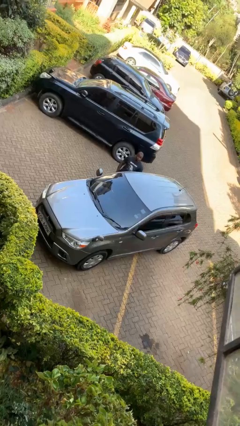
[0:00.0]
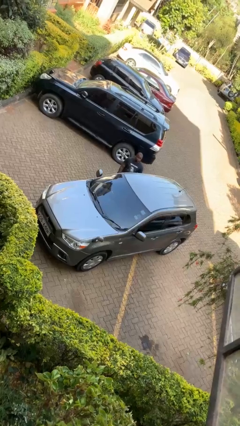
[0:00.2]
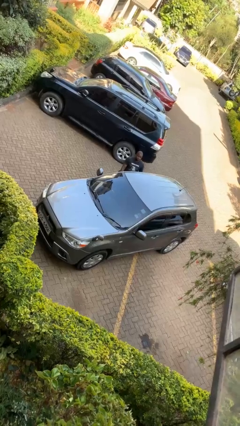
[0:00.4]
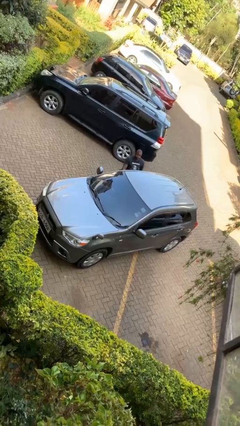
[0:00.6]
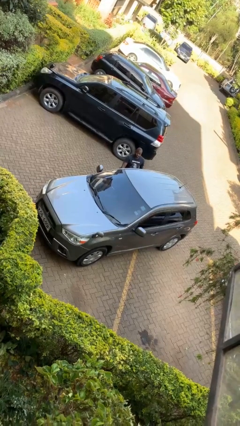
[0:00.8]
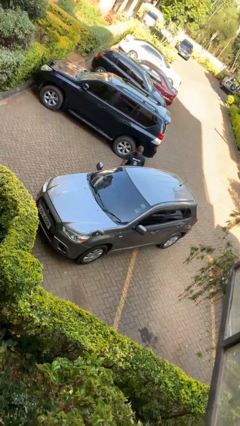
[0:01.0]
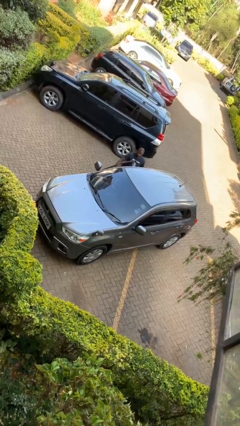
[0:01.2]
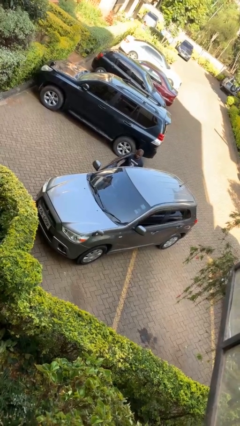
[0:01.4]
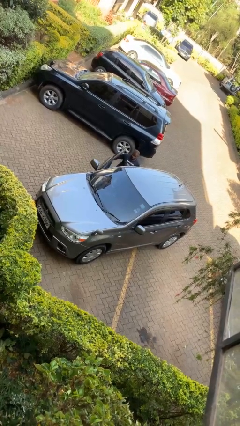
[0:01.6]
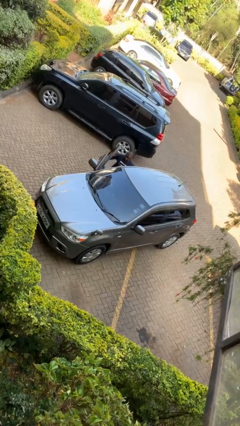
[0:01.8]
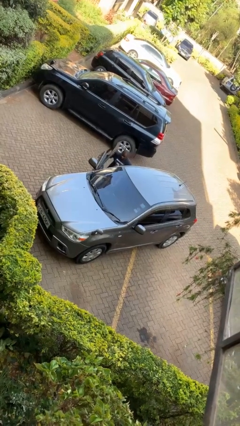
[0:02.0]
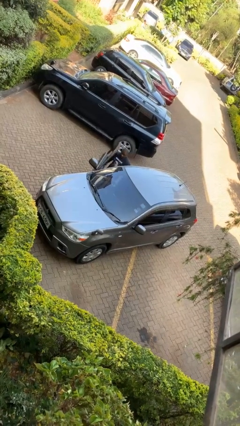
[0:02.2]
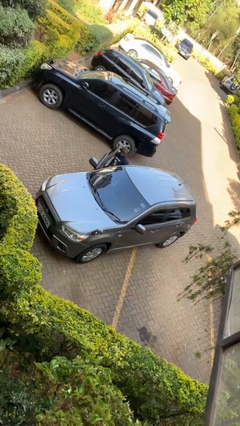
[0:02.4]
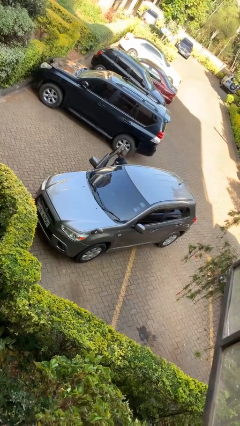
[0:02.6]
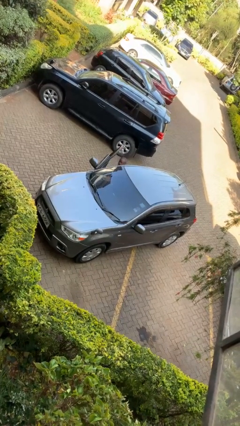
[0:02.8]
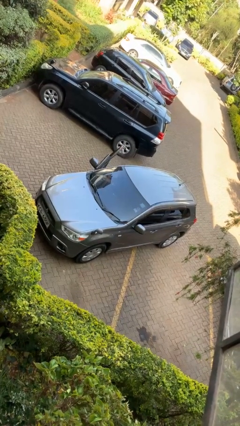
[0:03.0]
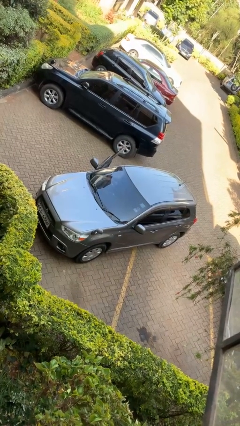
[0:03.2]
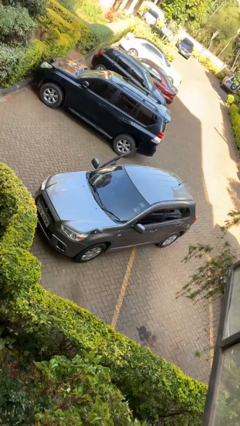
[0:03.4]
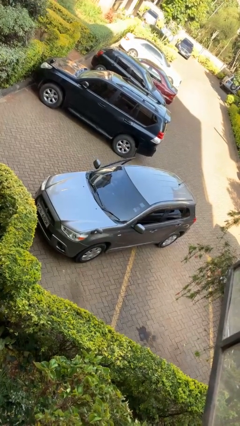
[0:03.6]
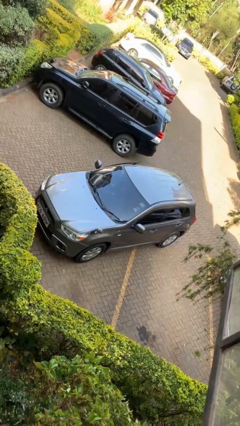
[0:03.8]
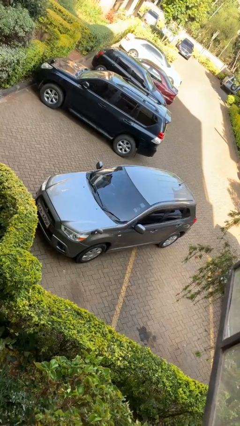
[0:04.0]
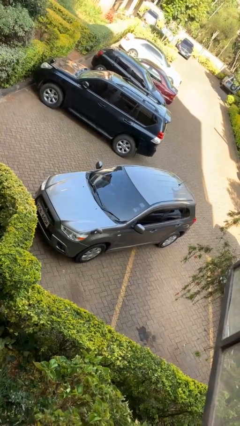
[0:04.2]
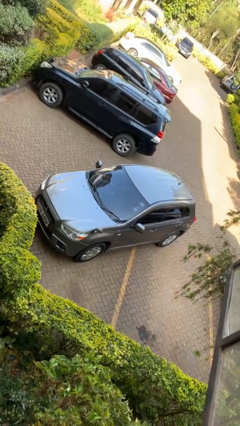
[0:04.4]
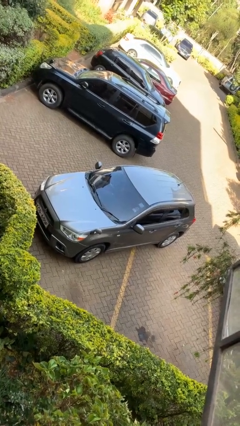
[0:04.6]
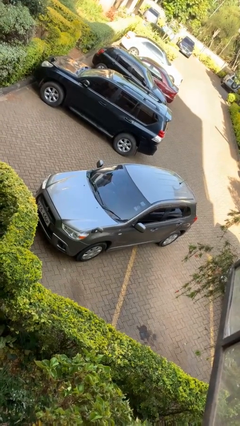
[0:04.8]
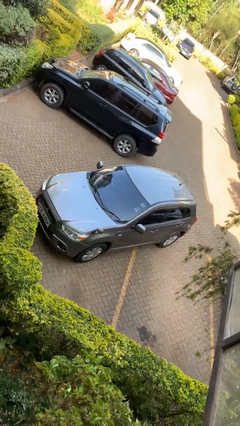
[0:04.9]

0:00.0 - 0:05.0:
car picks up person

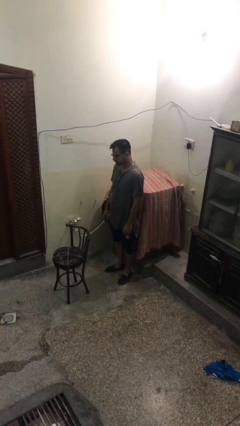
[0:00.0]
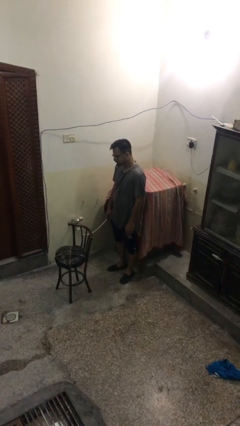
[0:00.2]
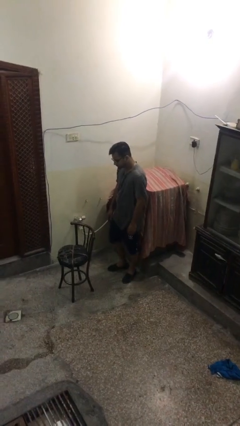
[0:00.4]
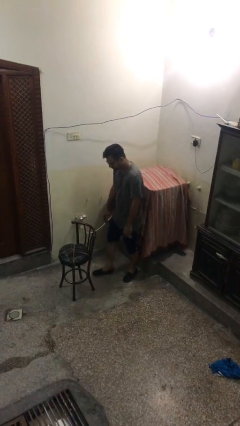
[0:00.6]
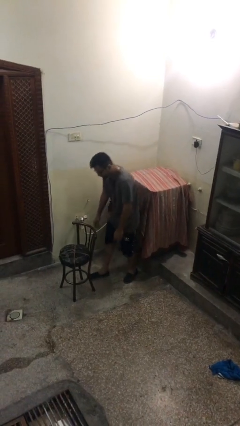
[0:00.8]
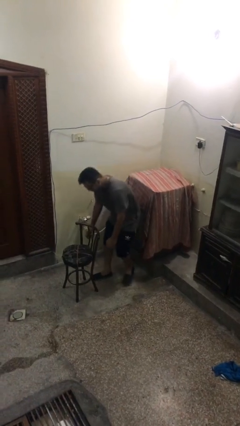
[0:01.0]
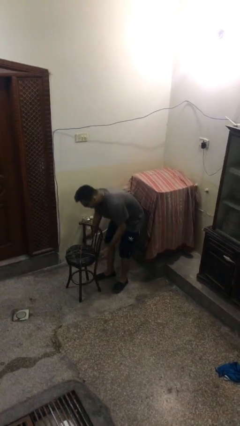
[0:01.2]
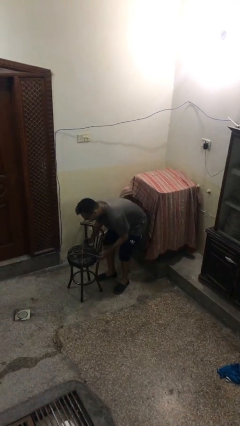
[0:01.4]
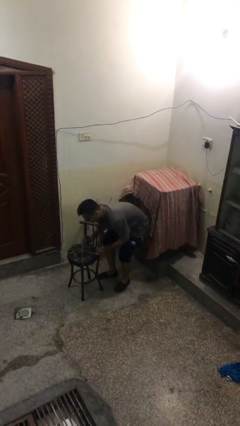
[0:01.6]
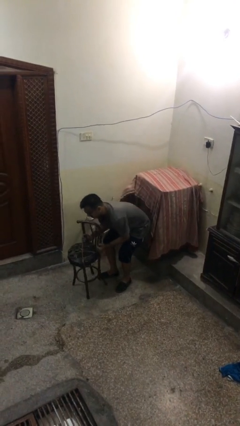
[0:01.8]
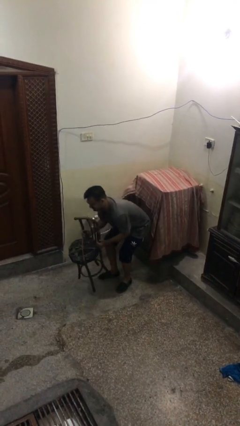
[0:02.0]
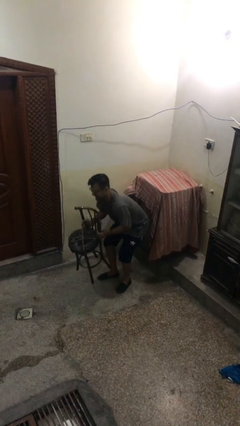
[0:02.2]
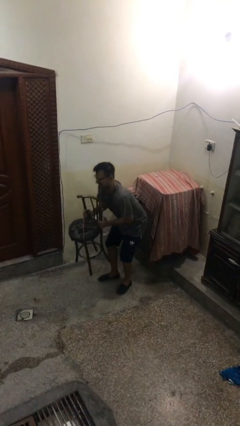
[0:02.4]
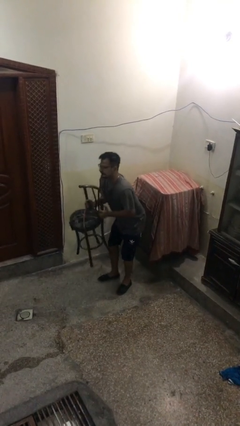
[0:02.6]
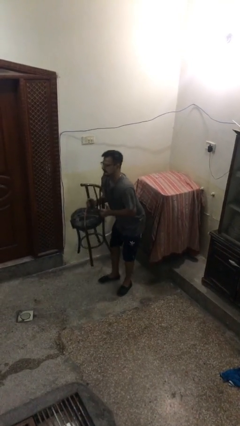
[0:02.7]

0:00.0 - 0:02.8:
person picks up object from floor

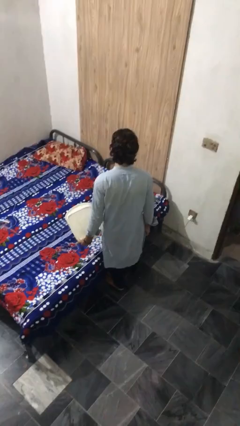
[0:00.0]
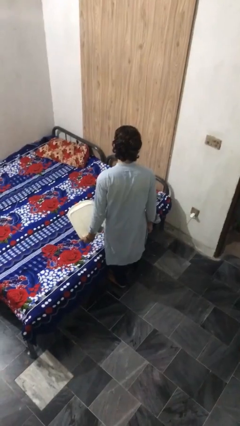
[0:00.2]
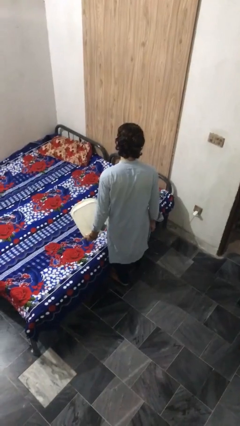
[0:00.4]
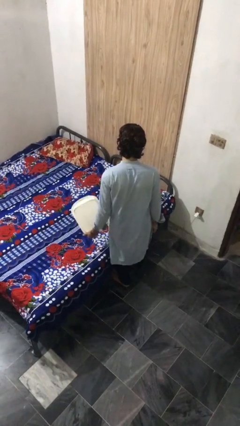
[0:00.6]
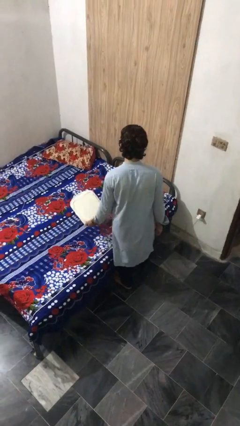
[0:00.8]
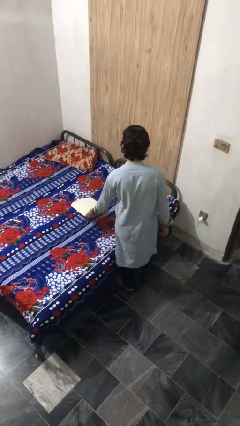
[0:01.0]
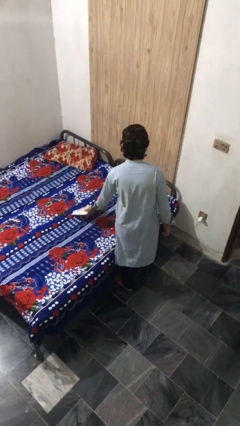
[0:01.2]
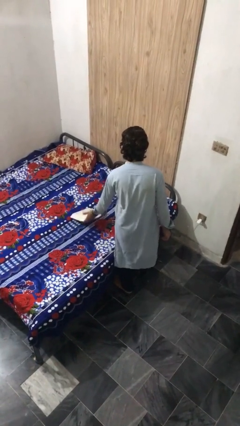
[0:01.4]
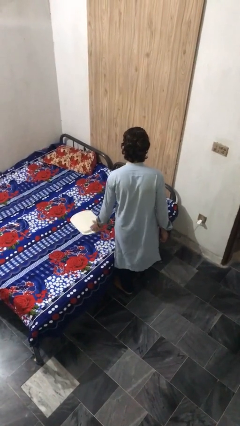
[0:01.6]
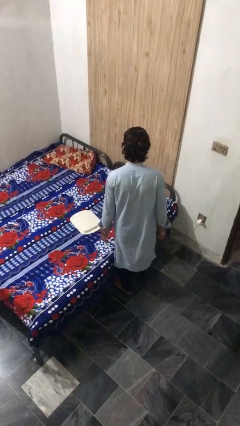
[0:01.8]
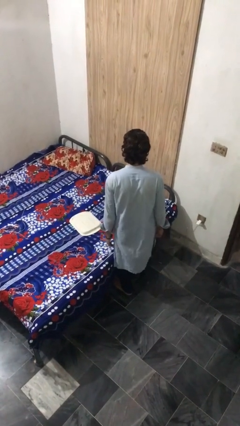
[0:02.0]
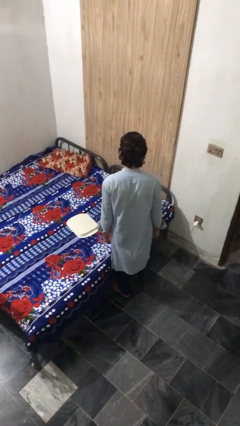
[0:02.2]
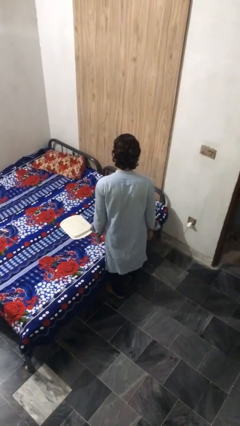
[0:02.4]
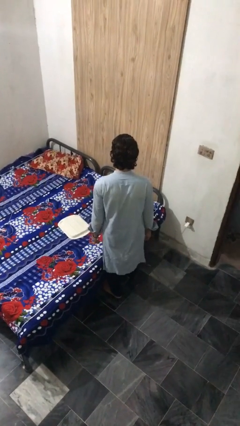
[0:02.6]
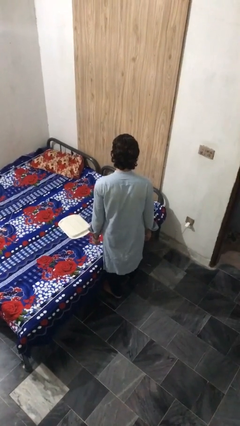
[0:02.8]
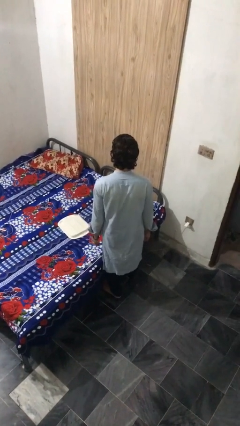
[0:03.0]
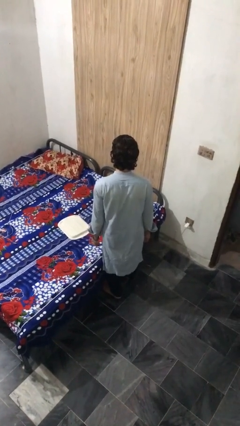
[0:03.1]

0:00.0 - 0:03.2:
person puts down object on bed

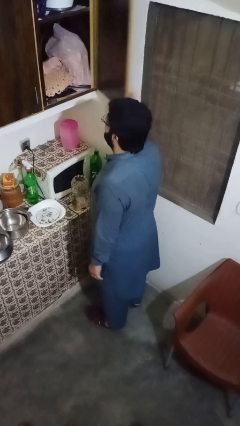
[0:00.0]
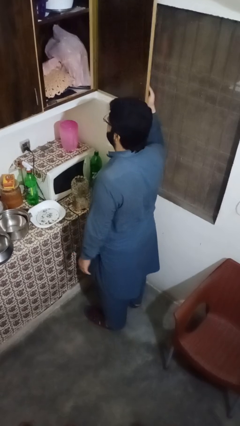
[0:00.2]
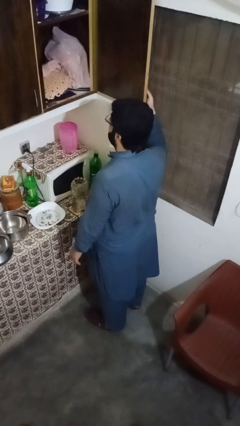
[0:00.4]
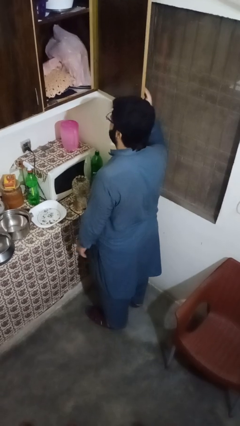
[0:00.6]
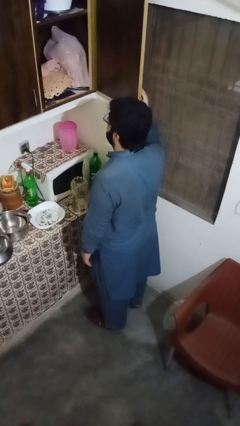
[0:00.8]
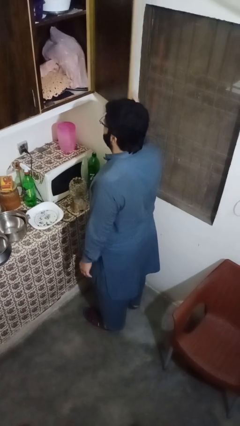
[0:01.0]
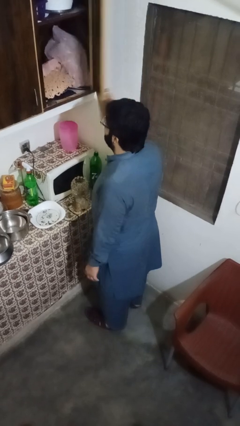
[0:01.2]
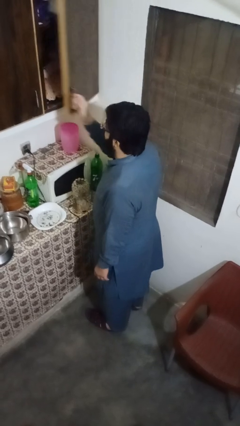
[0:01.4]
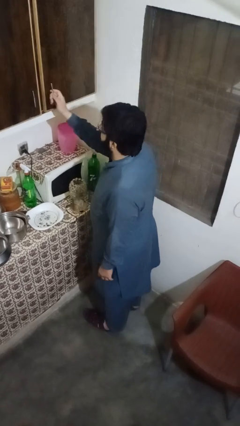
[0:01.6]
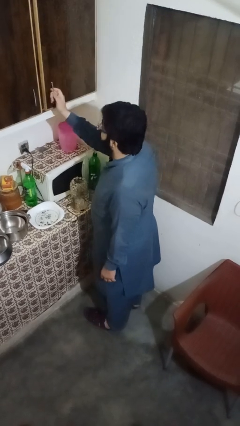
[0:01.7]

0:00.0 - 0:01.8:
person closes cabinet

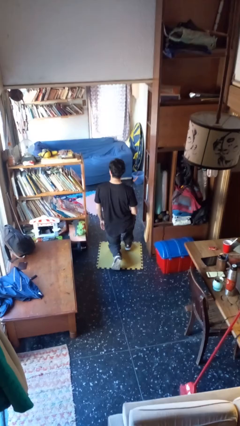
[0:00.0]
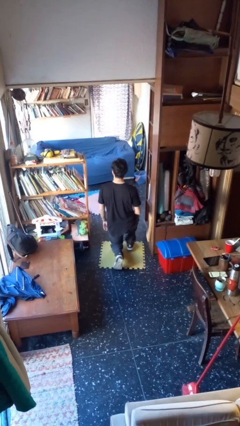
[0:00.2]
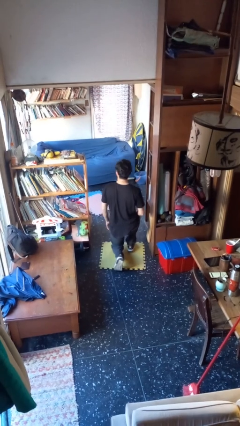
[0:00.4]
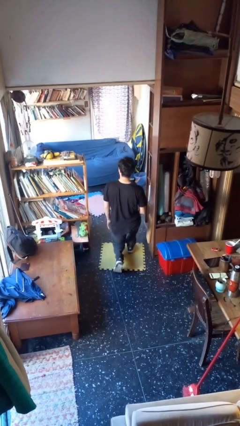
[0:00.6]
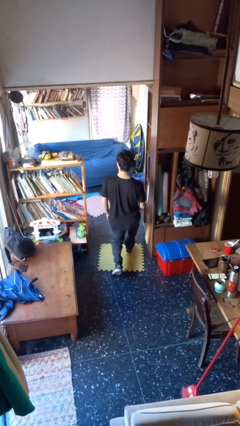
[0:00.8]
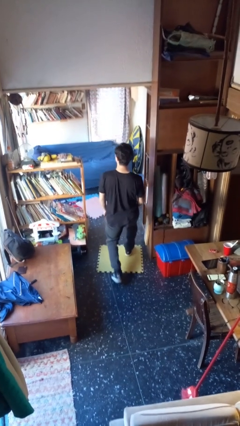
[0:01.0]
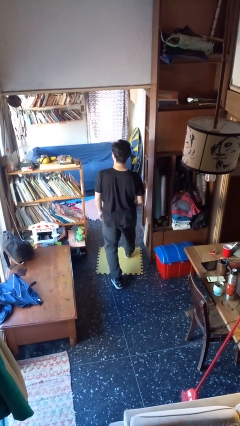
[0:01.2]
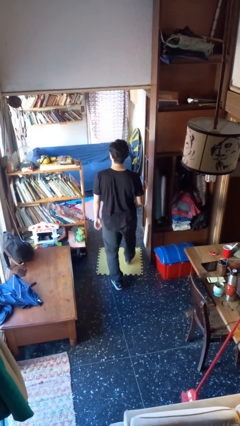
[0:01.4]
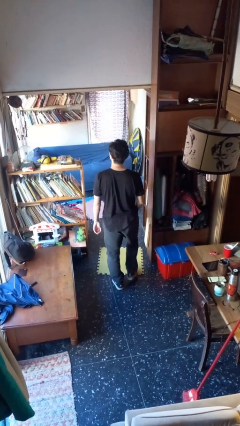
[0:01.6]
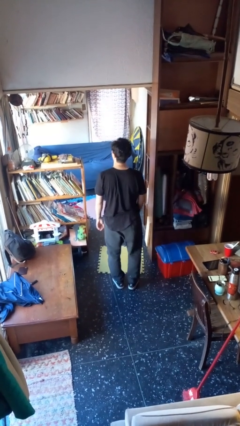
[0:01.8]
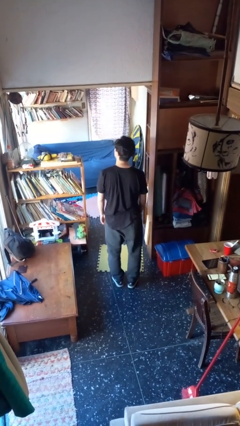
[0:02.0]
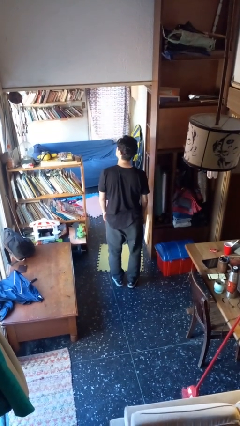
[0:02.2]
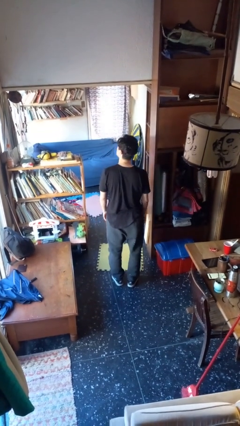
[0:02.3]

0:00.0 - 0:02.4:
person stands up from floor

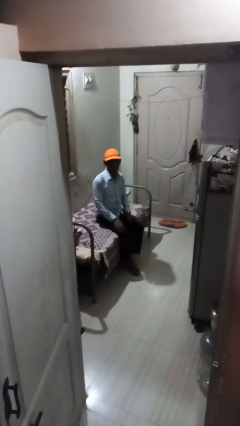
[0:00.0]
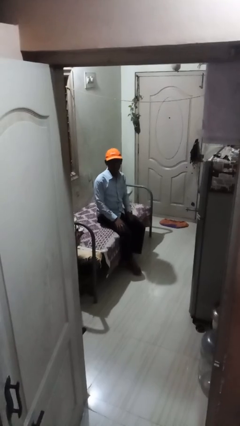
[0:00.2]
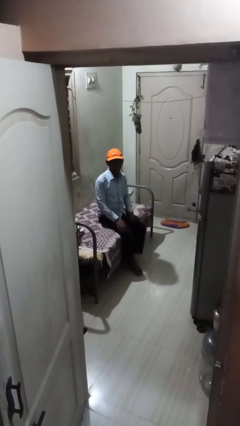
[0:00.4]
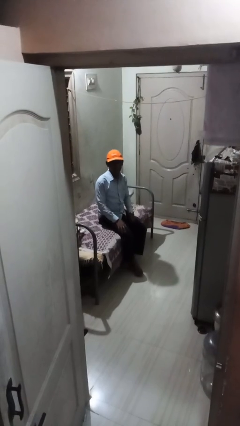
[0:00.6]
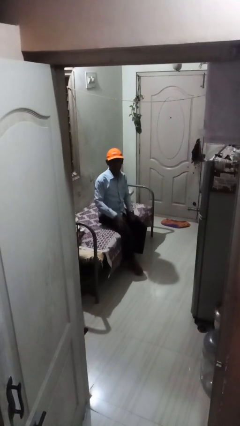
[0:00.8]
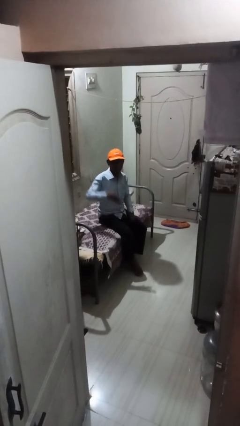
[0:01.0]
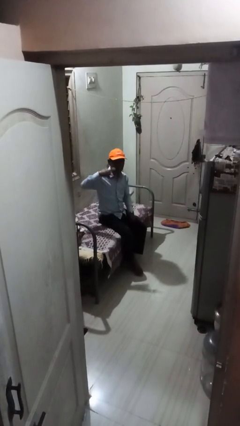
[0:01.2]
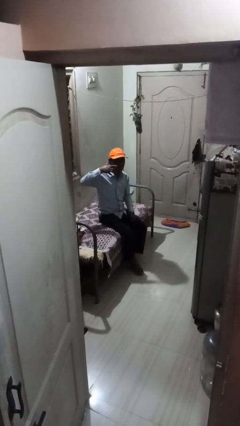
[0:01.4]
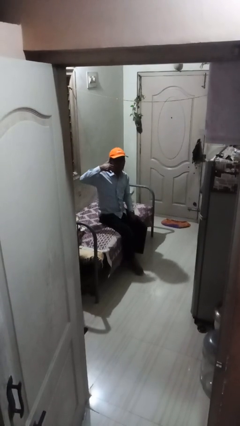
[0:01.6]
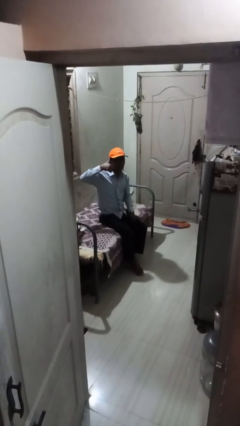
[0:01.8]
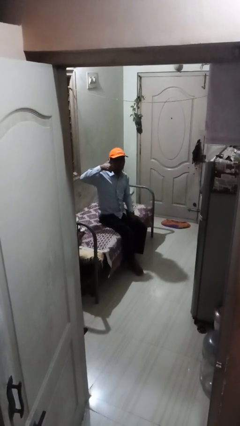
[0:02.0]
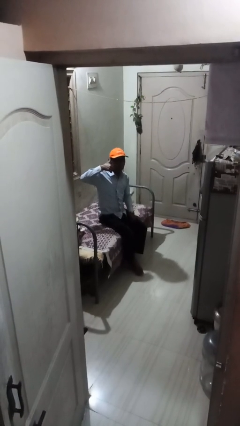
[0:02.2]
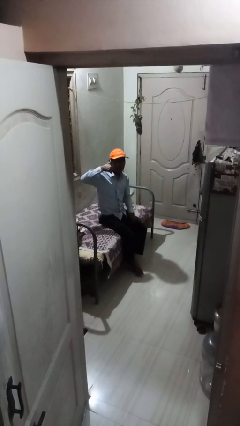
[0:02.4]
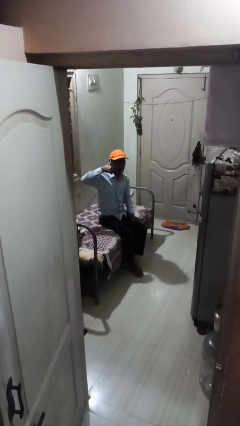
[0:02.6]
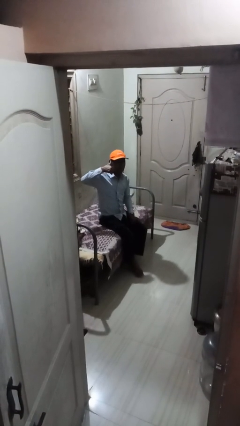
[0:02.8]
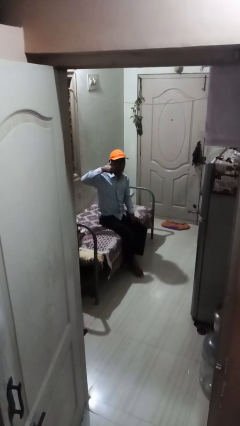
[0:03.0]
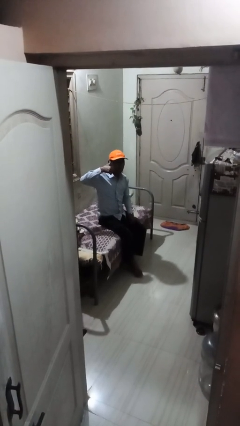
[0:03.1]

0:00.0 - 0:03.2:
person gestures call me
